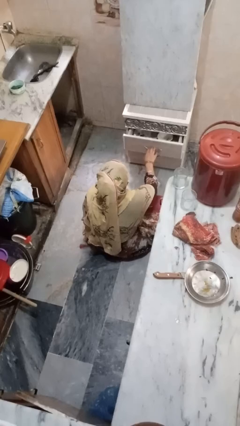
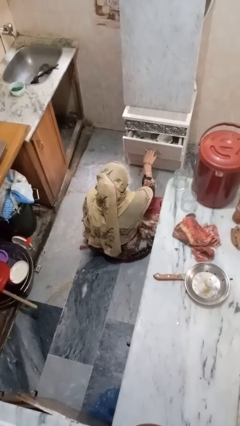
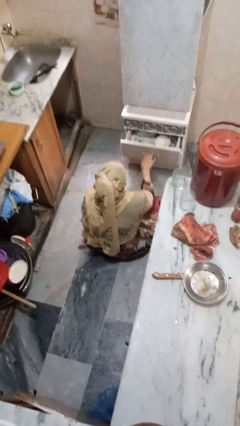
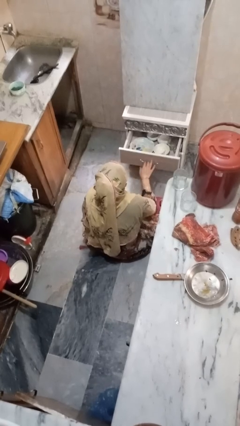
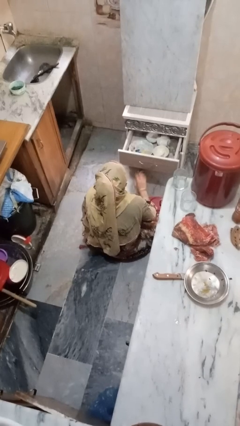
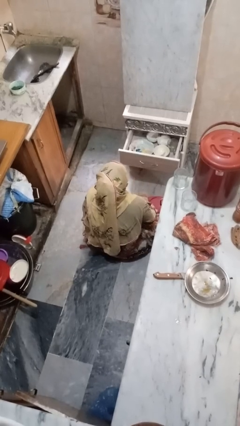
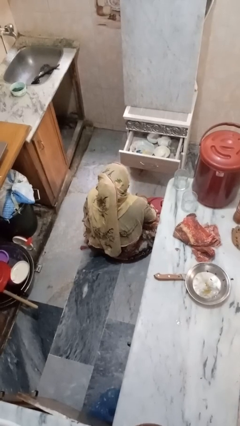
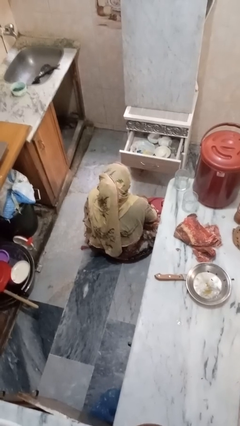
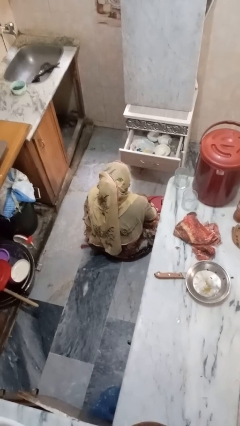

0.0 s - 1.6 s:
person opens kitchen drawer

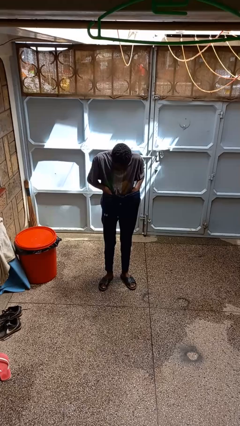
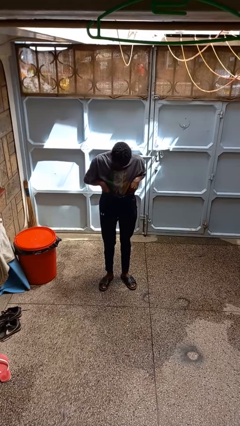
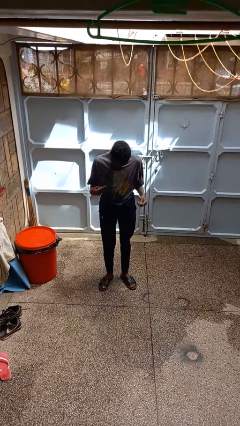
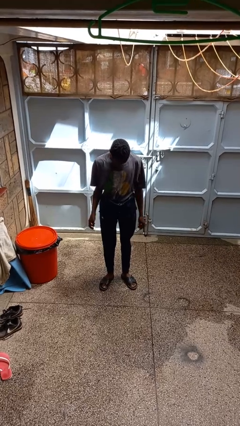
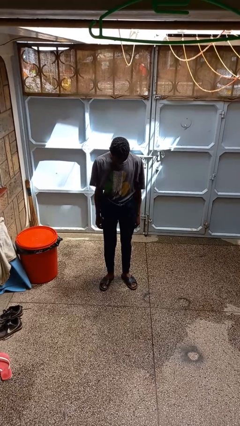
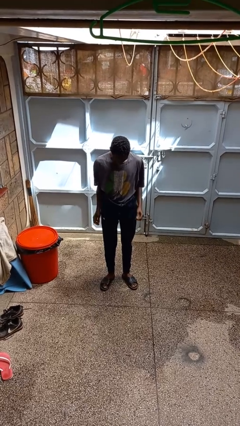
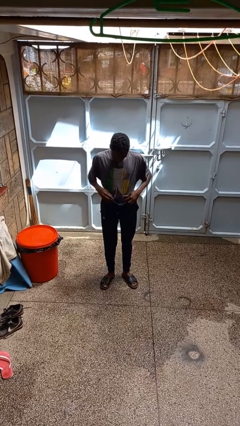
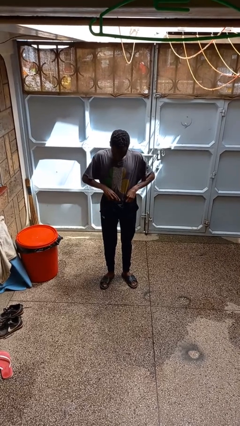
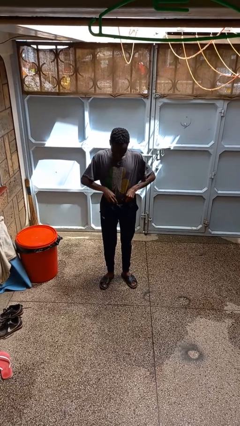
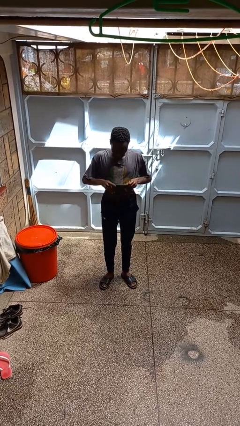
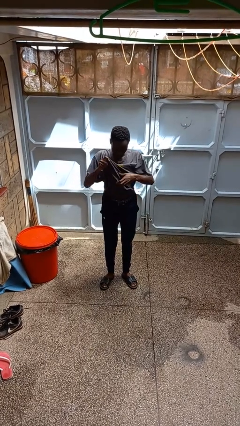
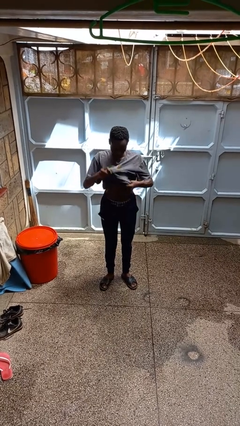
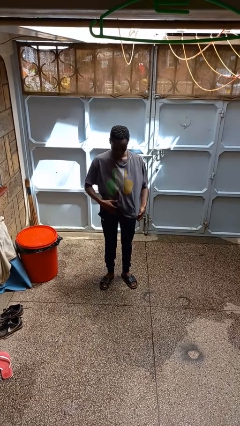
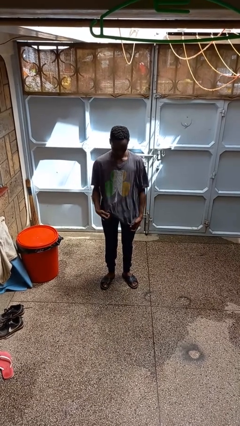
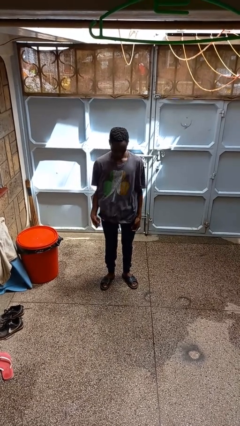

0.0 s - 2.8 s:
person untucks shirt

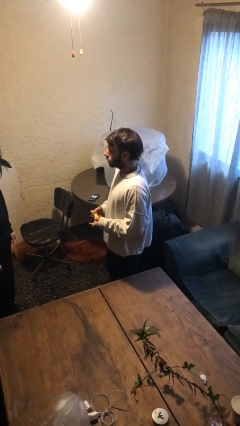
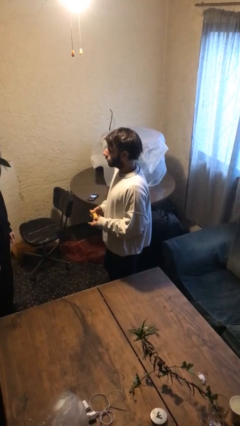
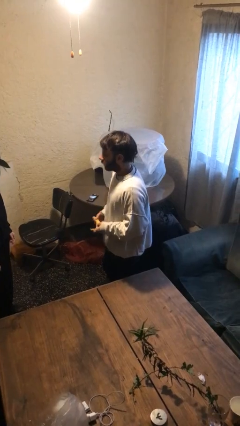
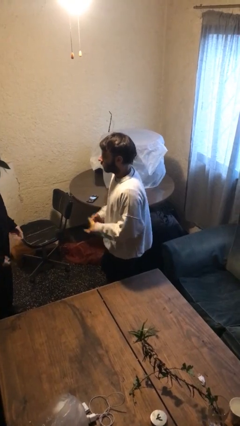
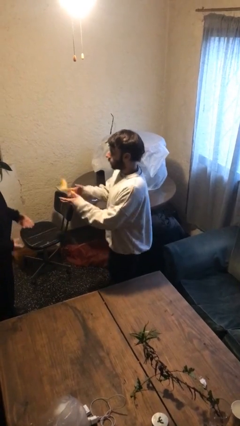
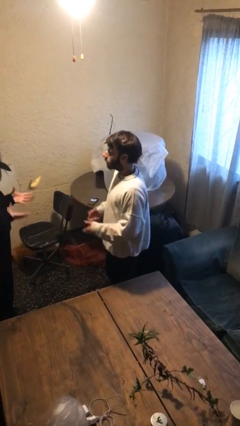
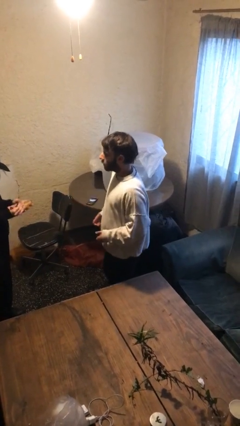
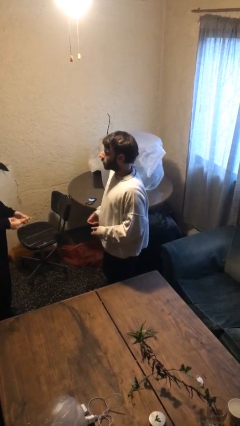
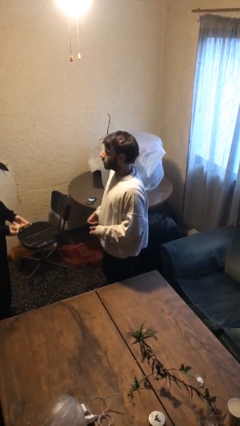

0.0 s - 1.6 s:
person throws object to person

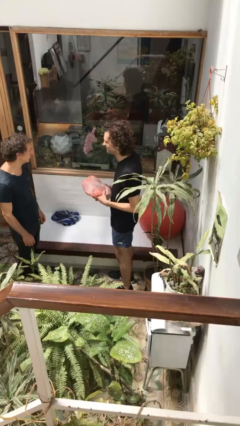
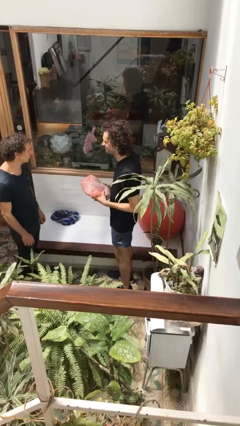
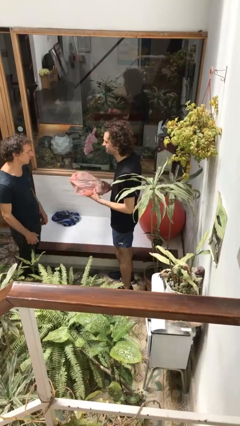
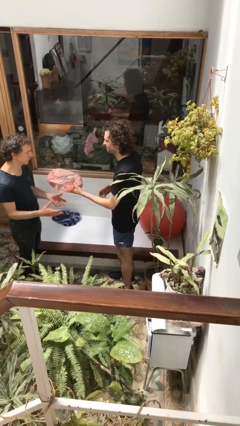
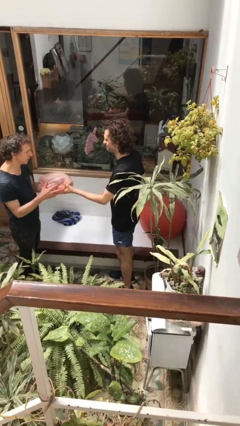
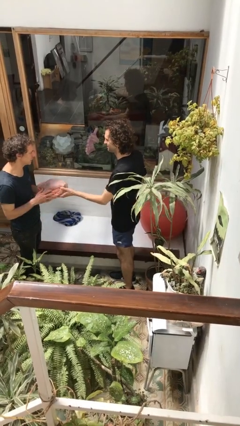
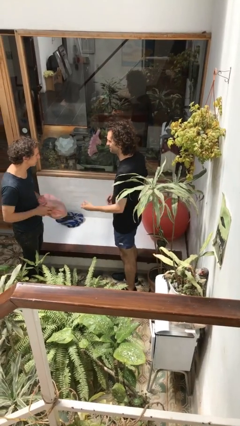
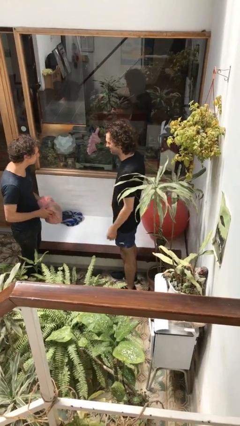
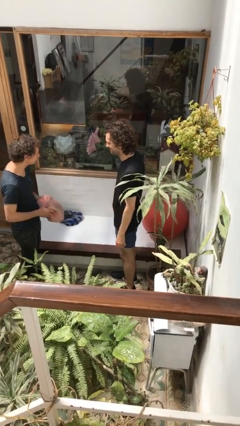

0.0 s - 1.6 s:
person transfers object to person

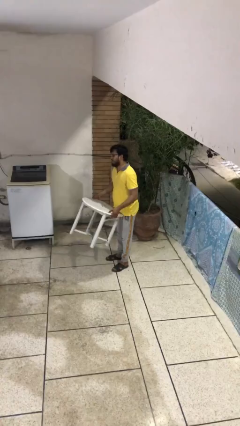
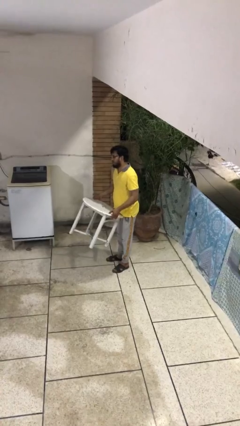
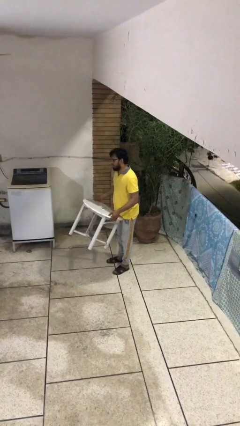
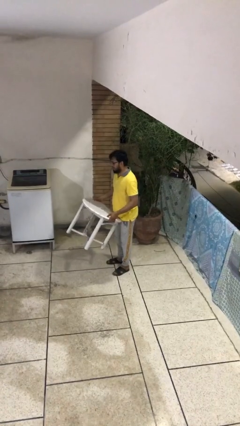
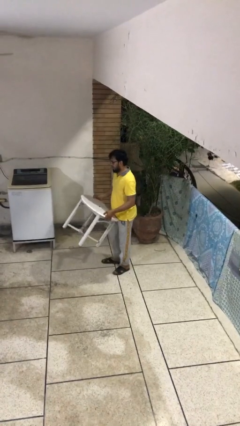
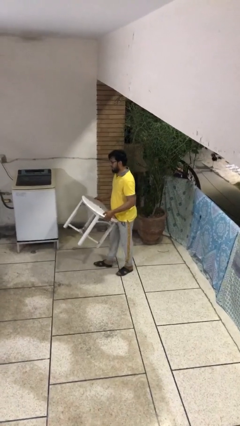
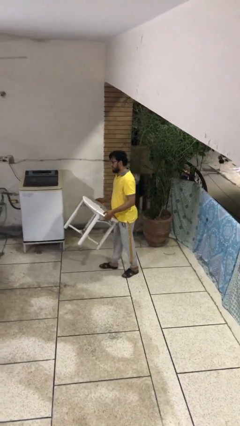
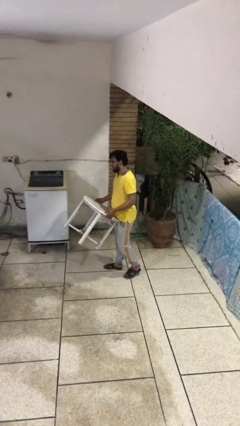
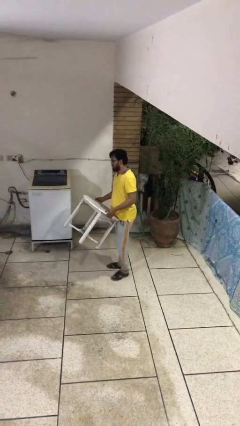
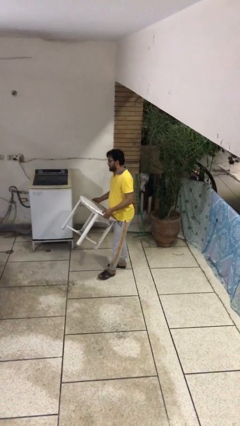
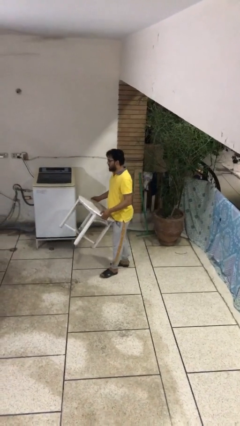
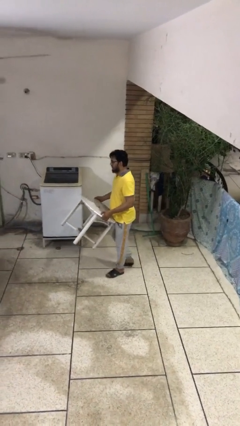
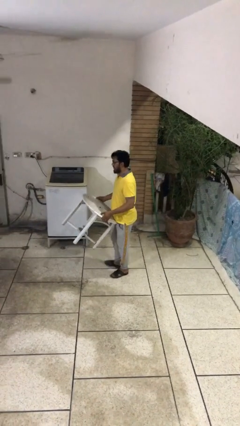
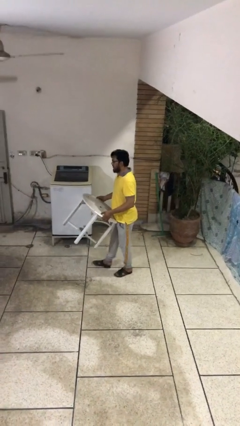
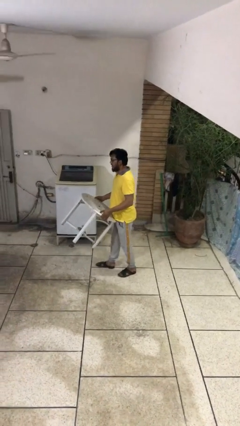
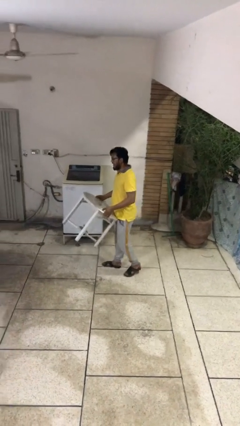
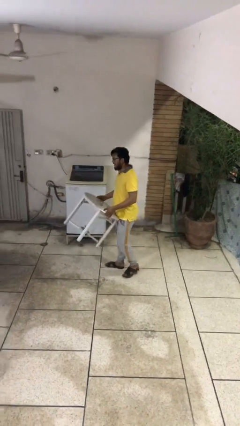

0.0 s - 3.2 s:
person carries heavy object

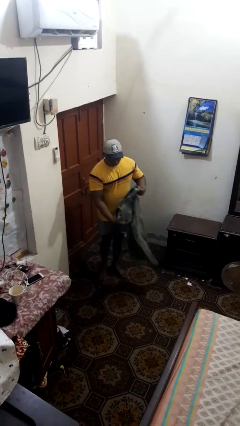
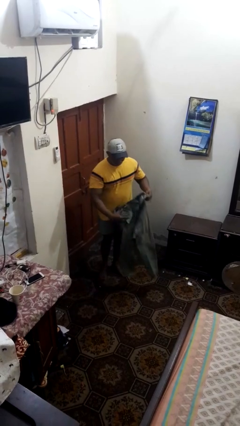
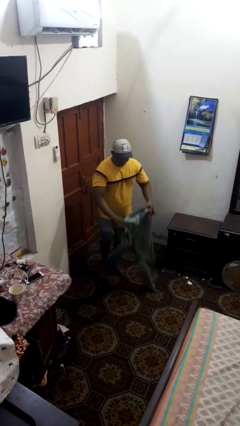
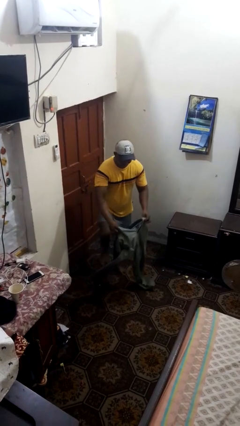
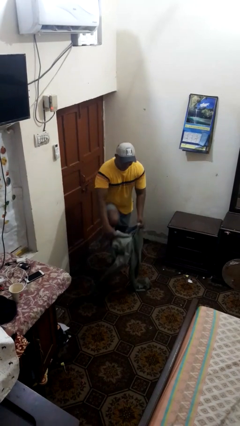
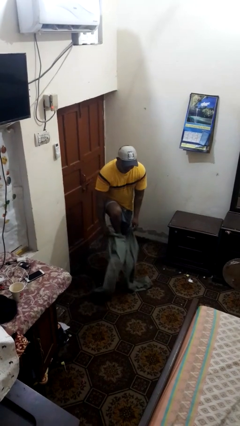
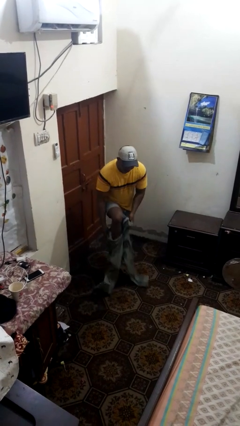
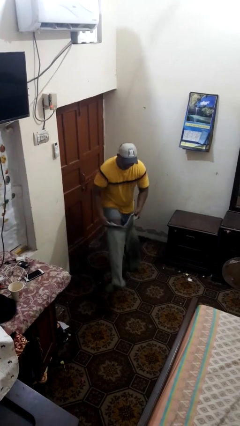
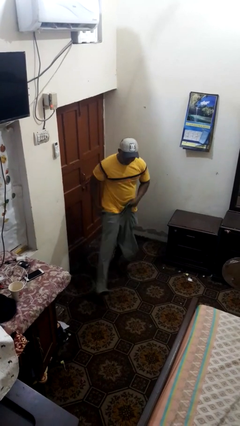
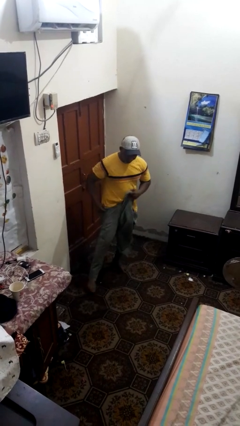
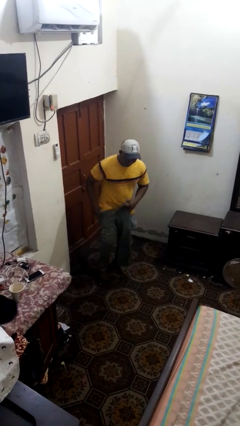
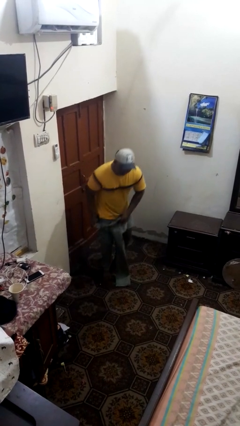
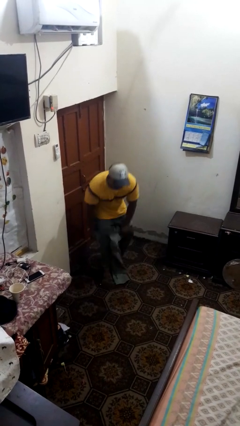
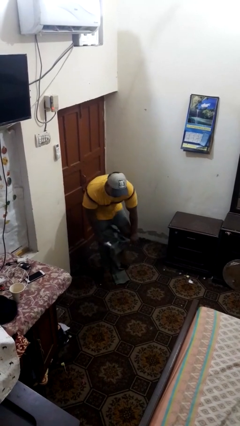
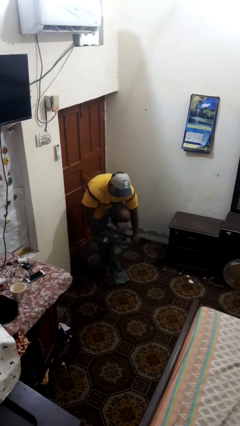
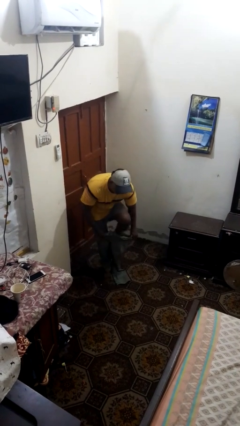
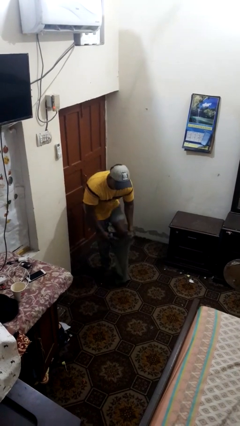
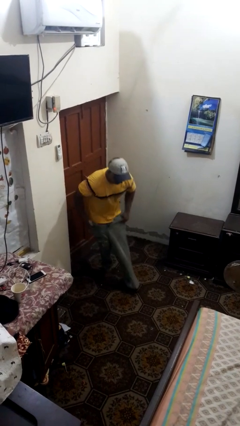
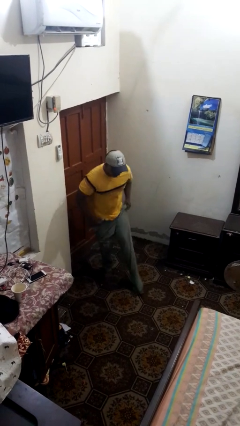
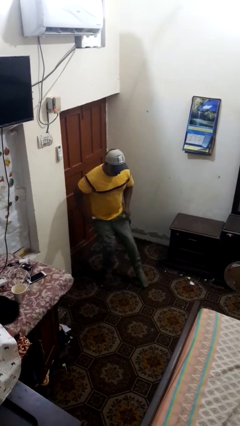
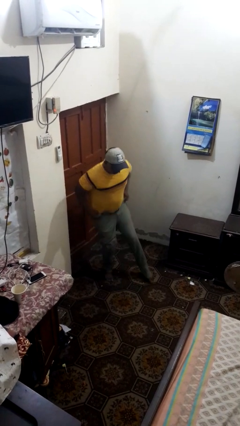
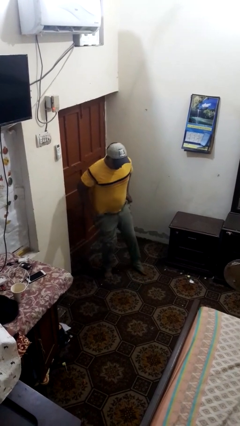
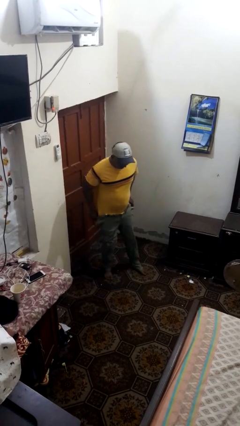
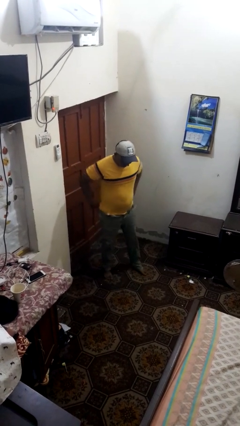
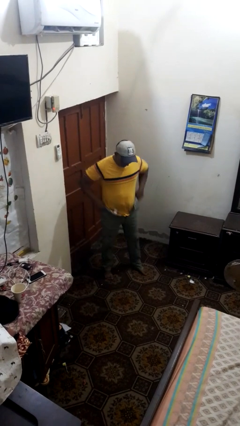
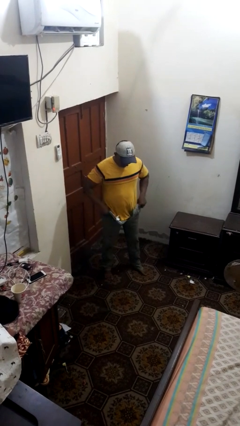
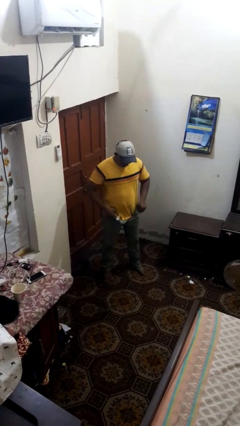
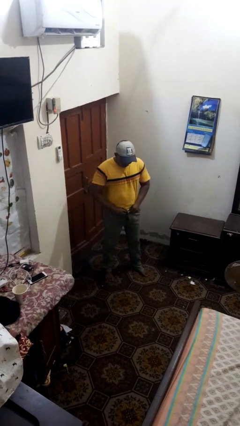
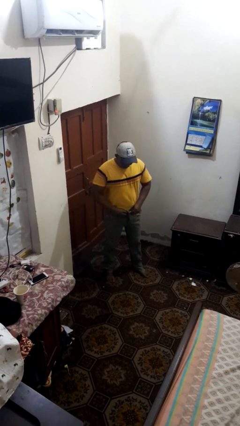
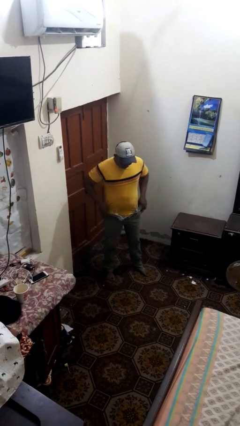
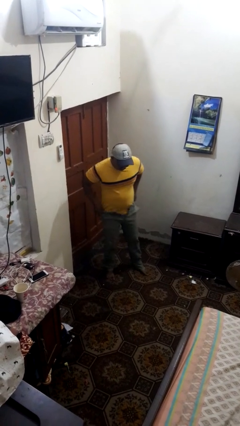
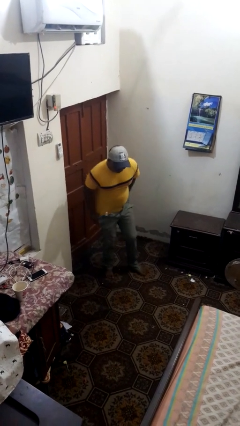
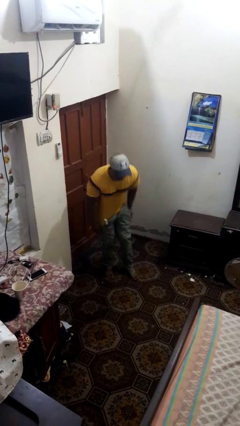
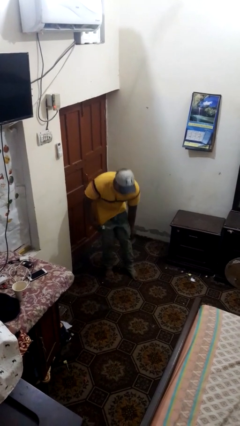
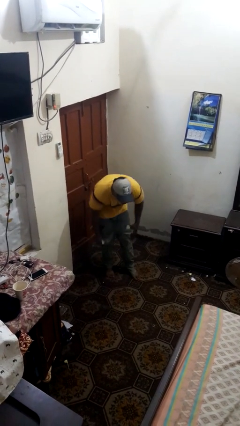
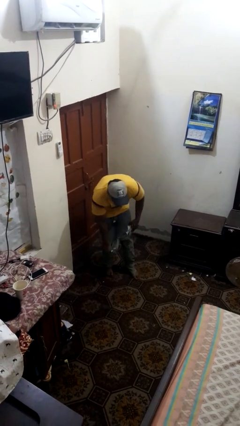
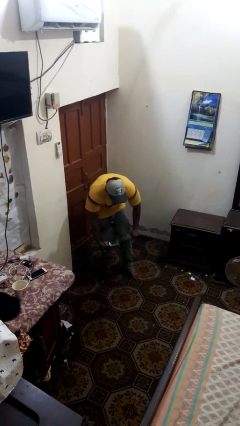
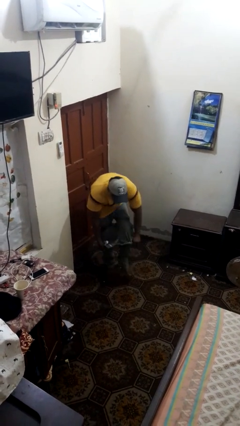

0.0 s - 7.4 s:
person puts on pants
